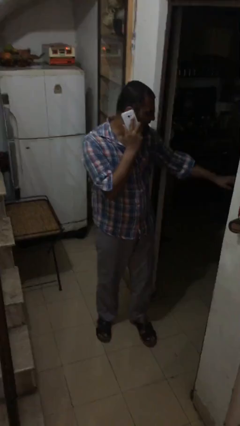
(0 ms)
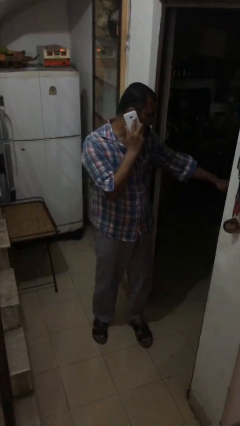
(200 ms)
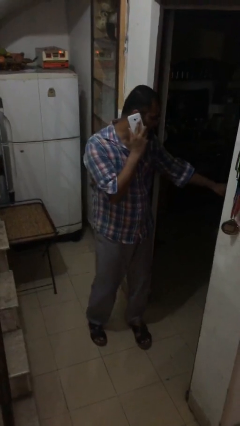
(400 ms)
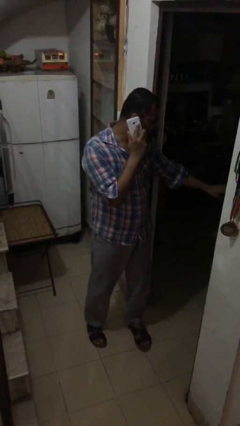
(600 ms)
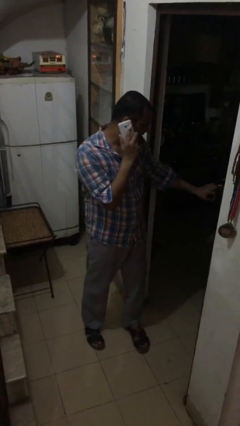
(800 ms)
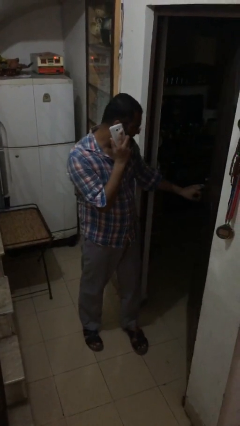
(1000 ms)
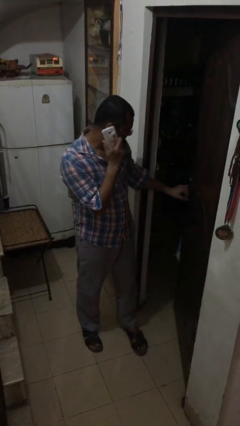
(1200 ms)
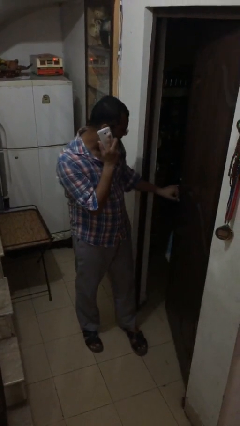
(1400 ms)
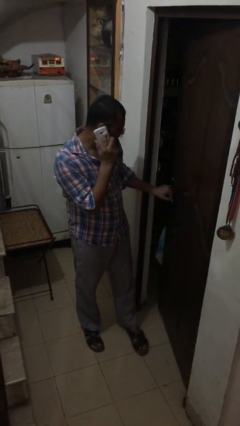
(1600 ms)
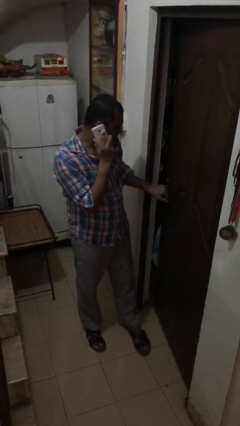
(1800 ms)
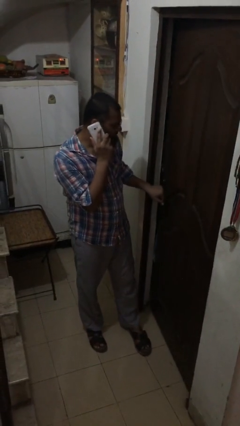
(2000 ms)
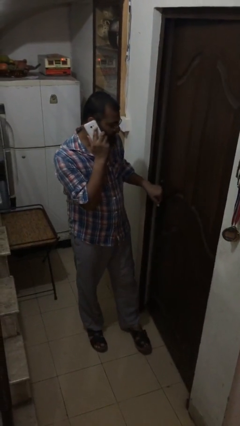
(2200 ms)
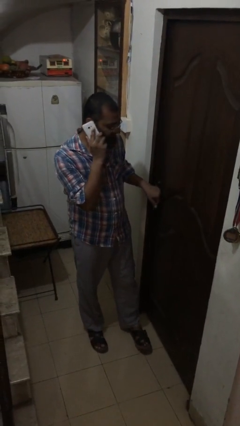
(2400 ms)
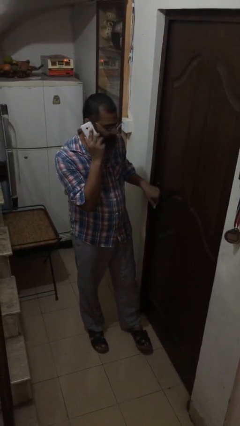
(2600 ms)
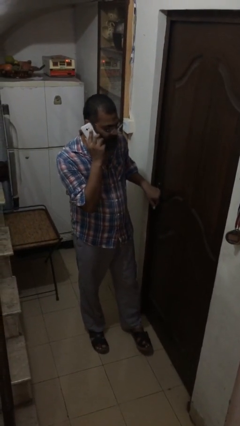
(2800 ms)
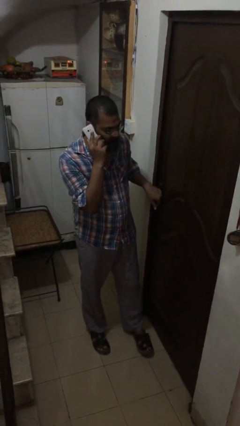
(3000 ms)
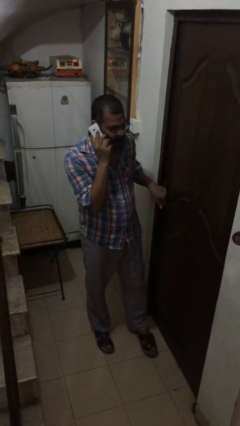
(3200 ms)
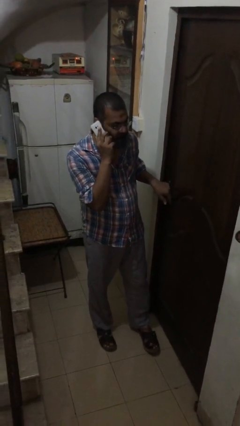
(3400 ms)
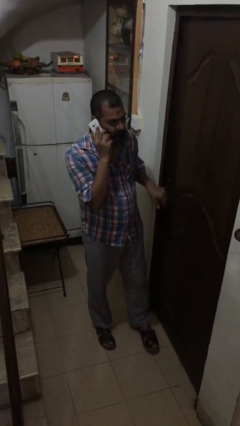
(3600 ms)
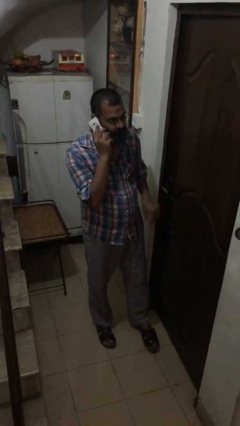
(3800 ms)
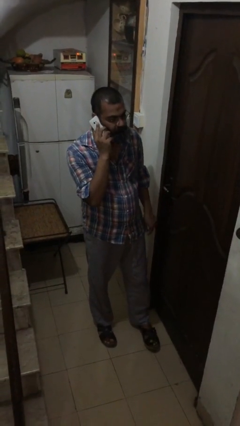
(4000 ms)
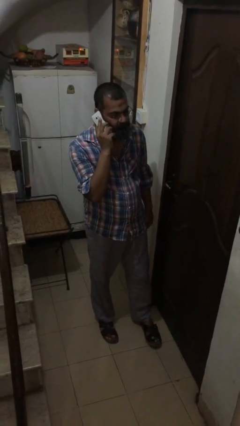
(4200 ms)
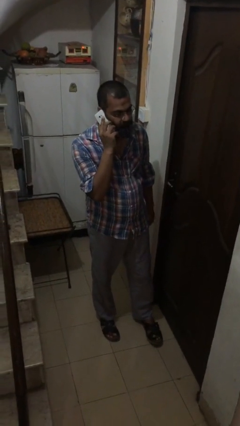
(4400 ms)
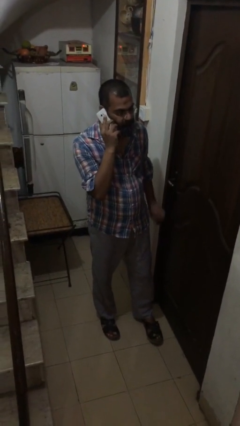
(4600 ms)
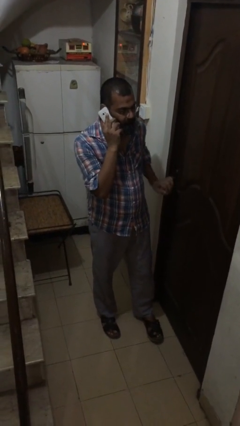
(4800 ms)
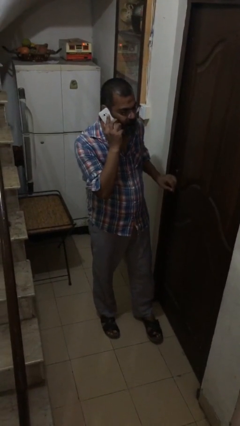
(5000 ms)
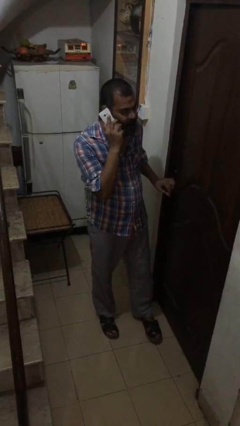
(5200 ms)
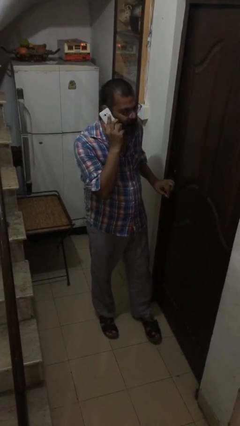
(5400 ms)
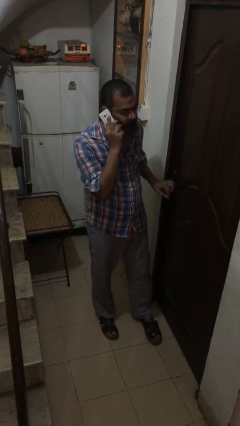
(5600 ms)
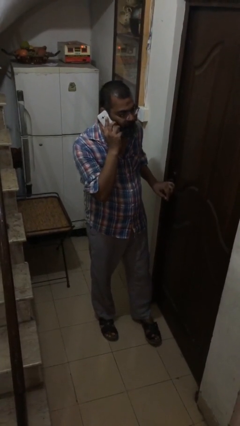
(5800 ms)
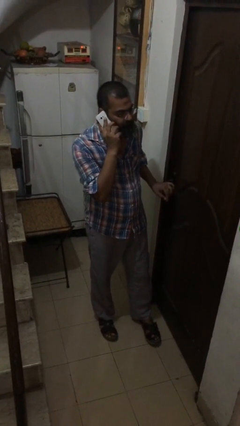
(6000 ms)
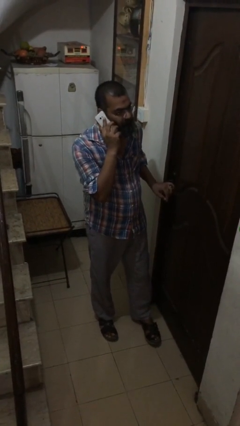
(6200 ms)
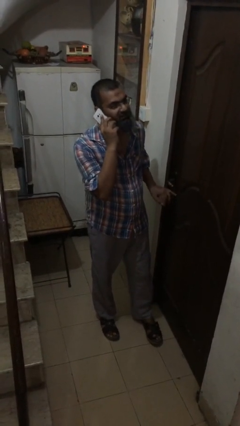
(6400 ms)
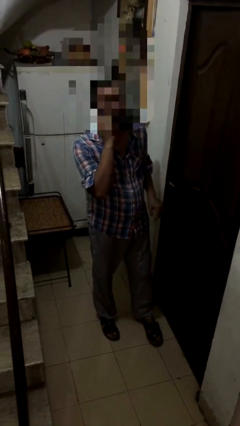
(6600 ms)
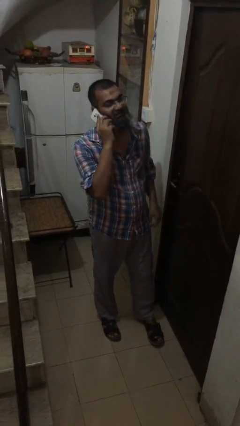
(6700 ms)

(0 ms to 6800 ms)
person closes facility door

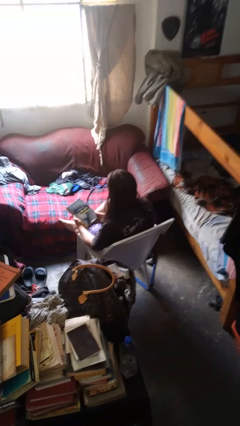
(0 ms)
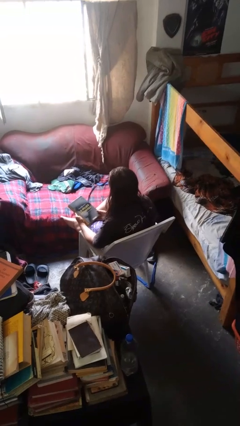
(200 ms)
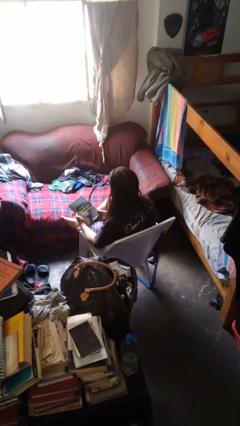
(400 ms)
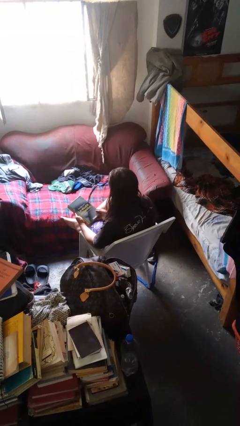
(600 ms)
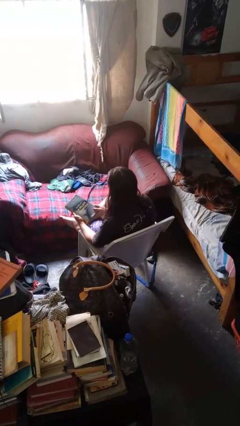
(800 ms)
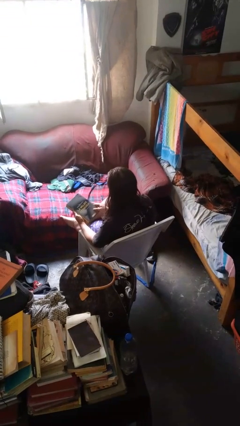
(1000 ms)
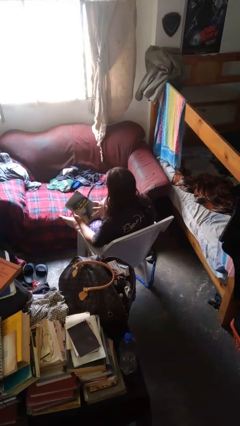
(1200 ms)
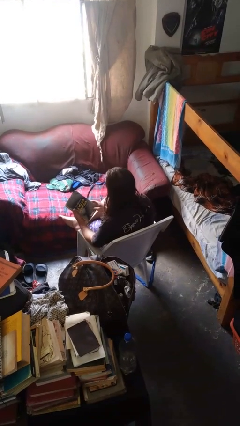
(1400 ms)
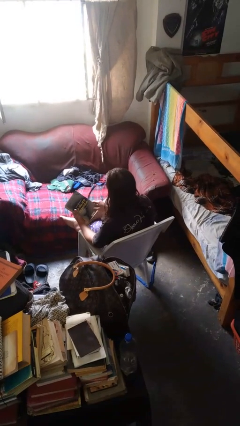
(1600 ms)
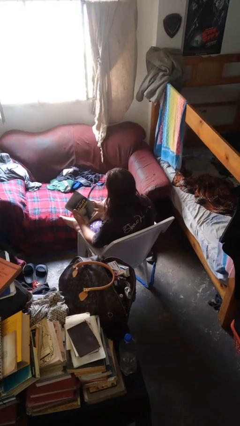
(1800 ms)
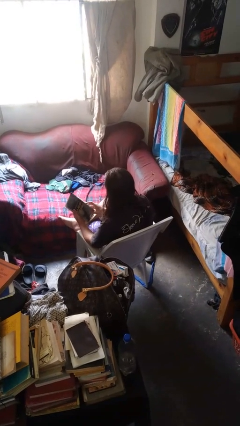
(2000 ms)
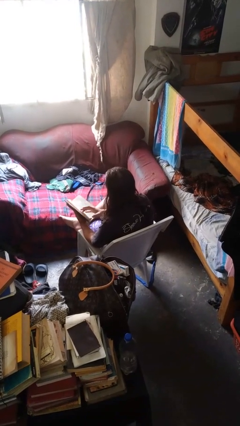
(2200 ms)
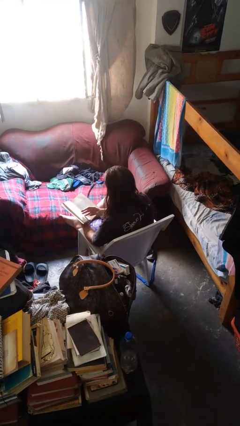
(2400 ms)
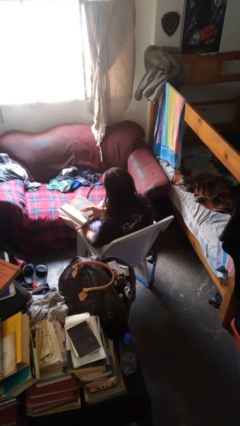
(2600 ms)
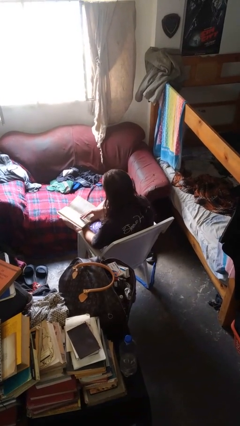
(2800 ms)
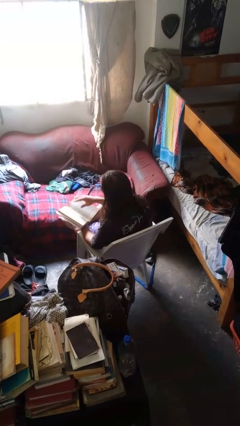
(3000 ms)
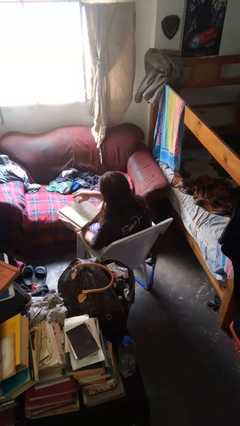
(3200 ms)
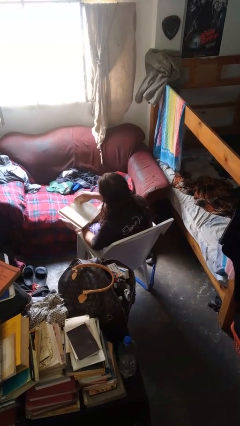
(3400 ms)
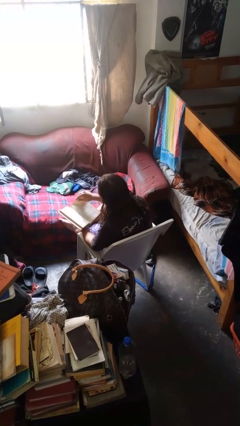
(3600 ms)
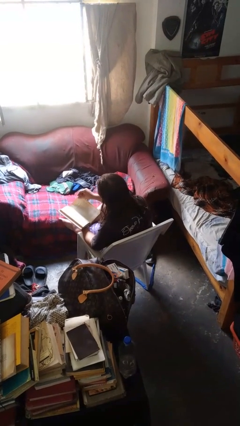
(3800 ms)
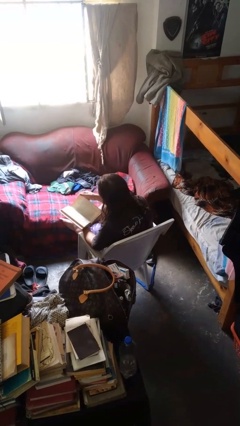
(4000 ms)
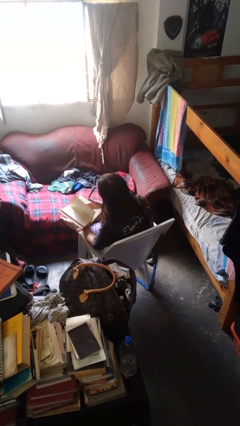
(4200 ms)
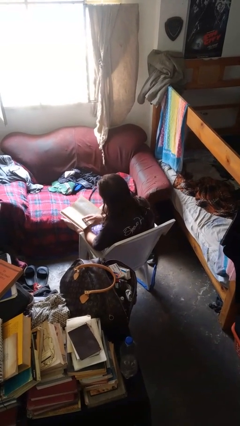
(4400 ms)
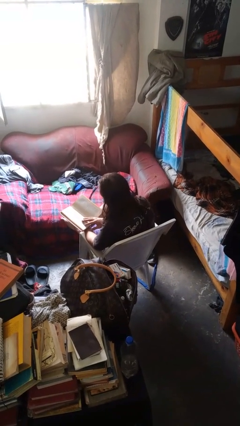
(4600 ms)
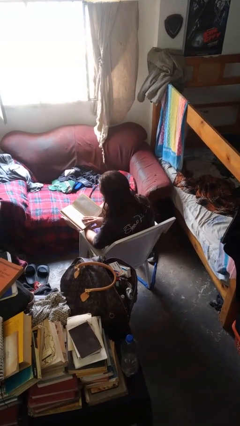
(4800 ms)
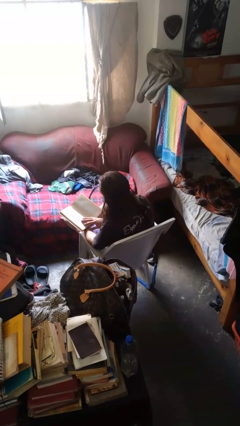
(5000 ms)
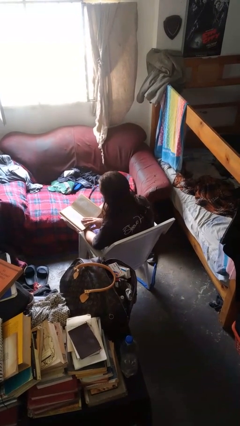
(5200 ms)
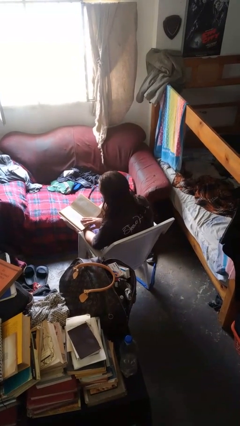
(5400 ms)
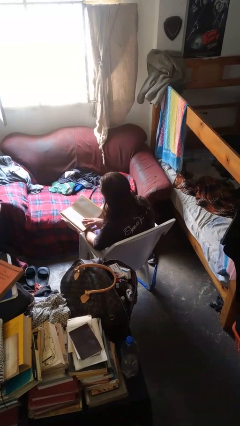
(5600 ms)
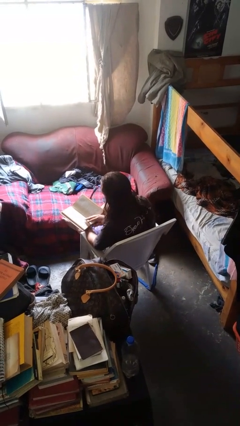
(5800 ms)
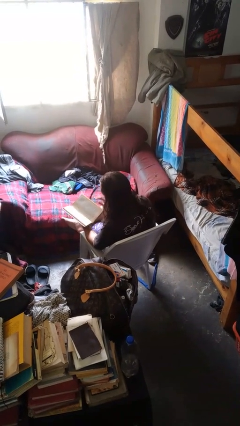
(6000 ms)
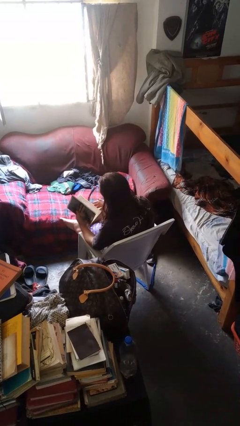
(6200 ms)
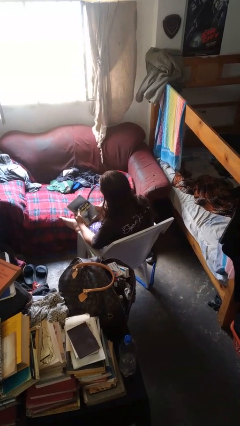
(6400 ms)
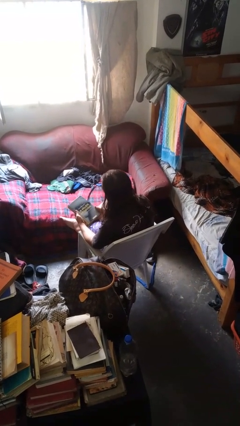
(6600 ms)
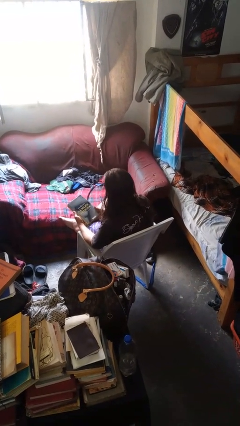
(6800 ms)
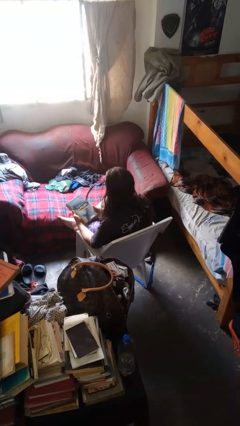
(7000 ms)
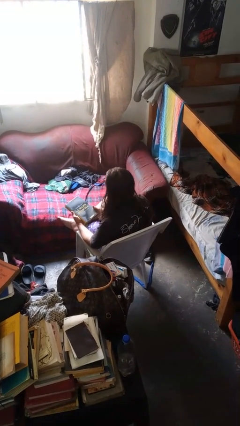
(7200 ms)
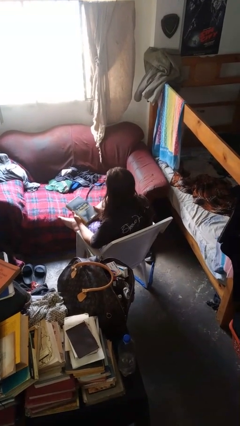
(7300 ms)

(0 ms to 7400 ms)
person reads book

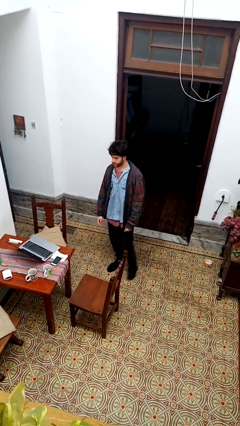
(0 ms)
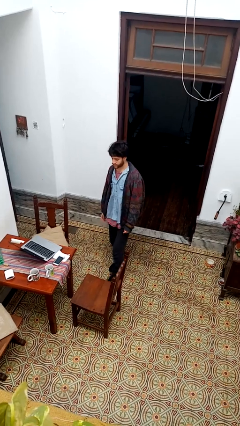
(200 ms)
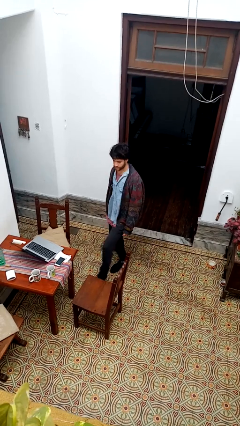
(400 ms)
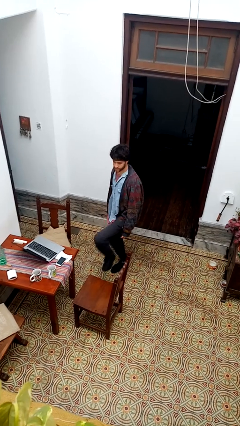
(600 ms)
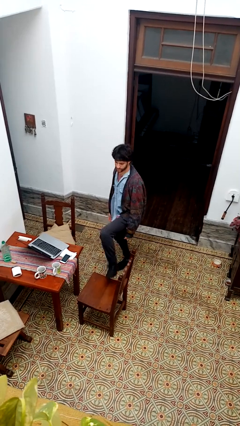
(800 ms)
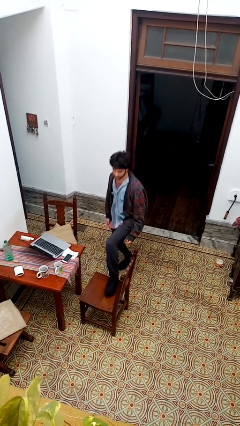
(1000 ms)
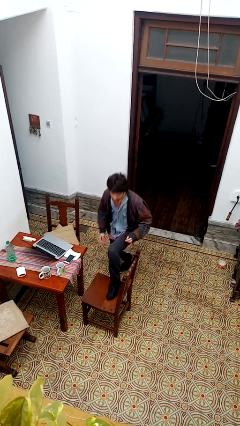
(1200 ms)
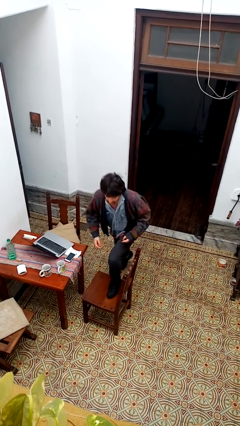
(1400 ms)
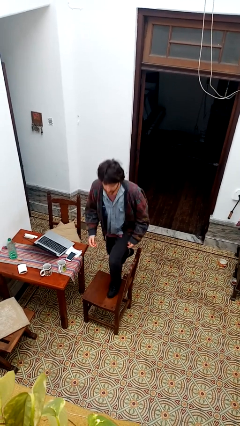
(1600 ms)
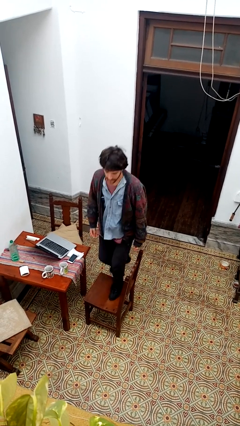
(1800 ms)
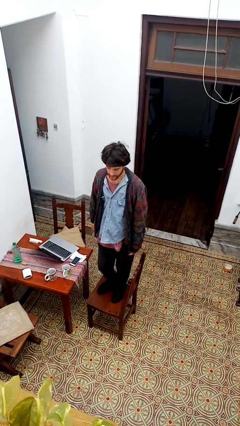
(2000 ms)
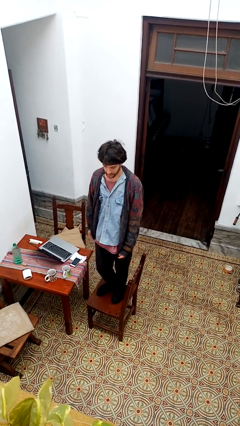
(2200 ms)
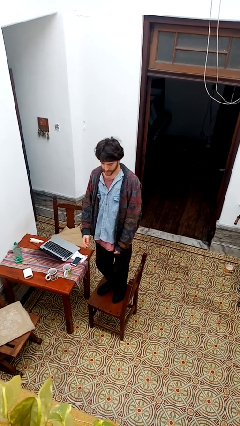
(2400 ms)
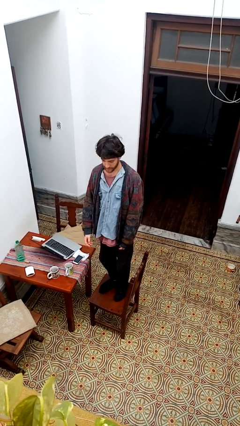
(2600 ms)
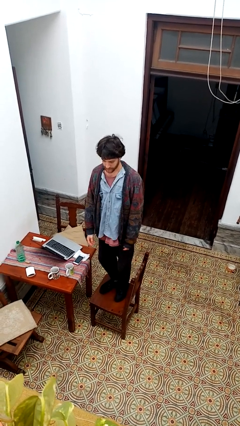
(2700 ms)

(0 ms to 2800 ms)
person climbs on chair

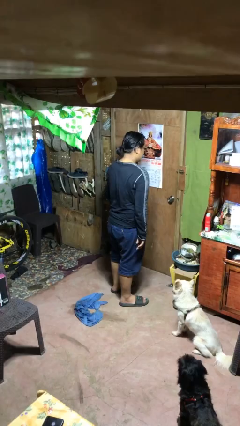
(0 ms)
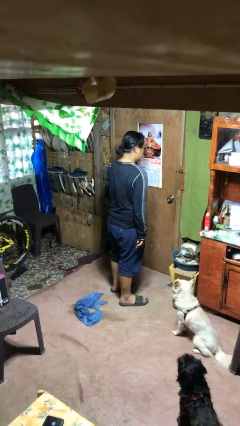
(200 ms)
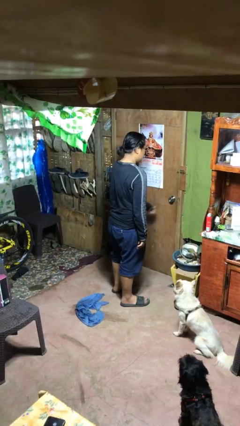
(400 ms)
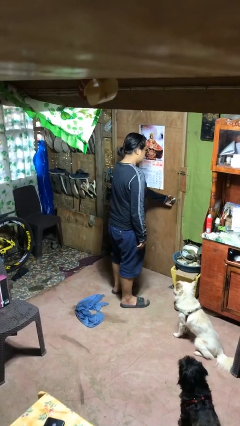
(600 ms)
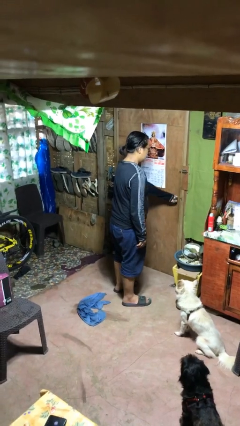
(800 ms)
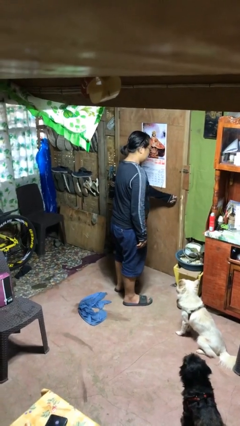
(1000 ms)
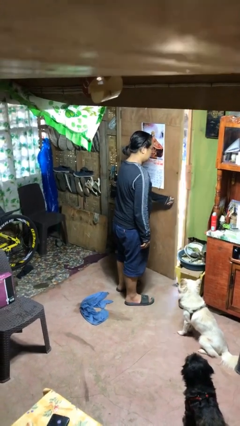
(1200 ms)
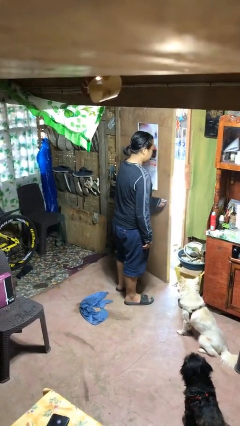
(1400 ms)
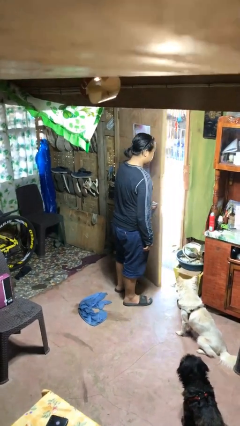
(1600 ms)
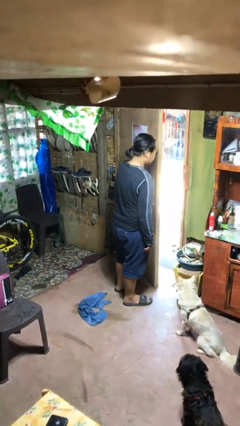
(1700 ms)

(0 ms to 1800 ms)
person opens facility door
